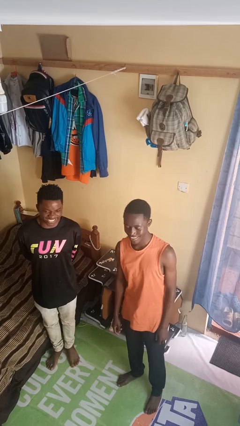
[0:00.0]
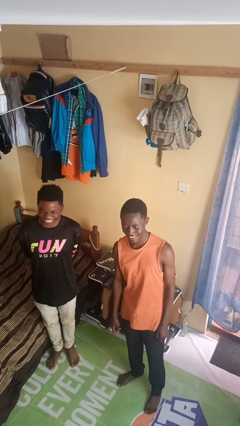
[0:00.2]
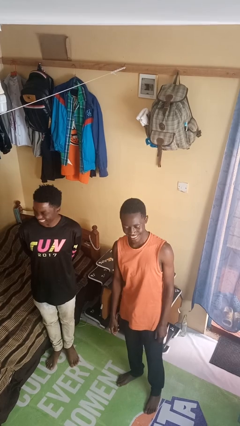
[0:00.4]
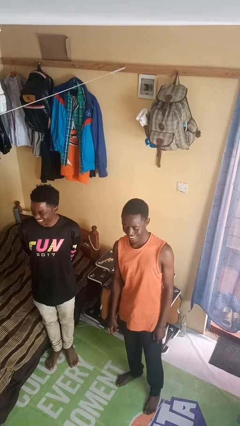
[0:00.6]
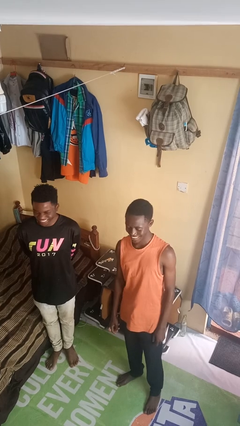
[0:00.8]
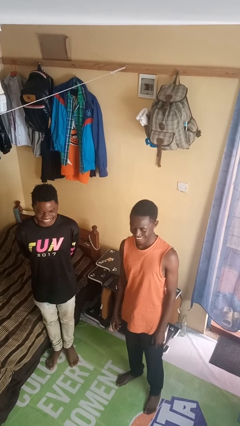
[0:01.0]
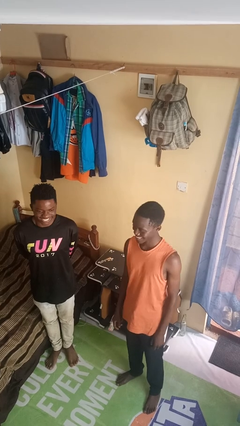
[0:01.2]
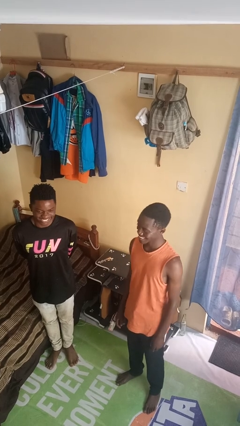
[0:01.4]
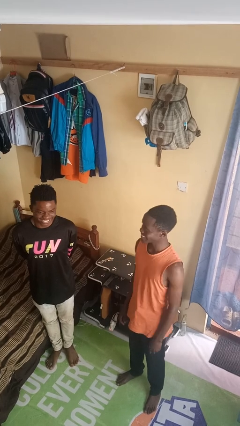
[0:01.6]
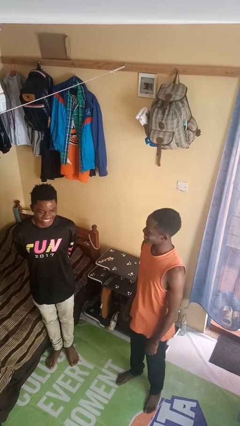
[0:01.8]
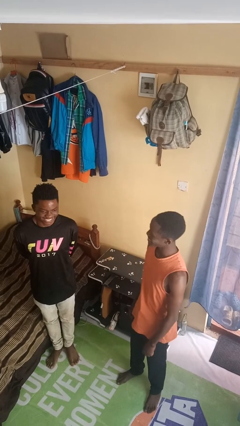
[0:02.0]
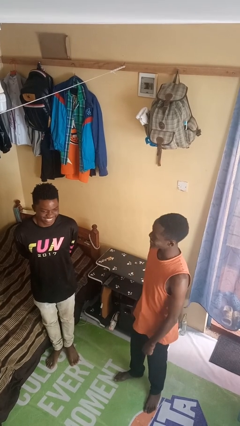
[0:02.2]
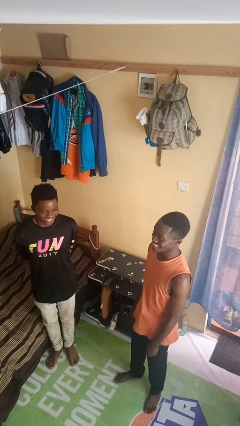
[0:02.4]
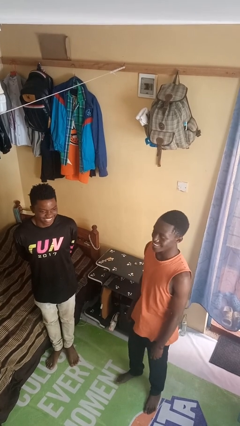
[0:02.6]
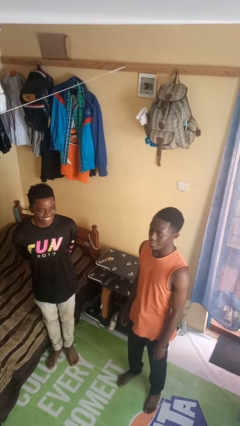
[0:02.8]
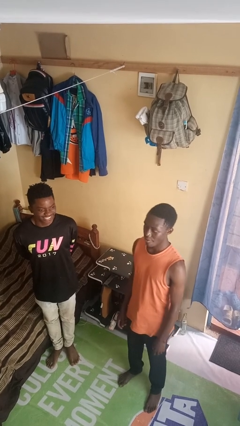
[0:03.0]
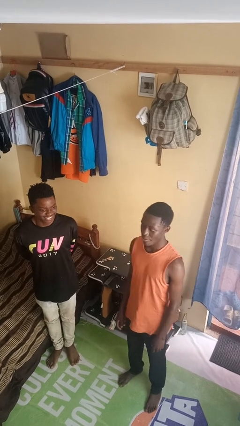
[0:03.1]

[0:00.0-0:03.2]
person laughs with person

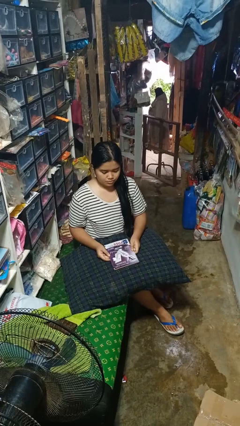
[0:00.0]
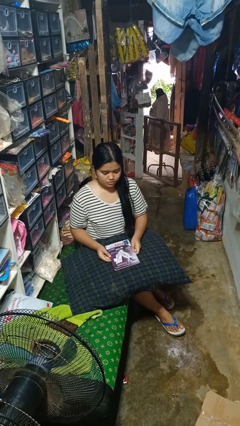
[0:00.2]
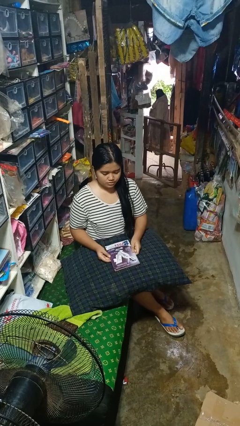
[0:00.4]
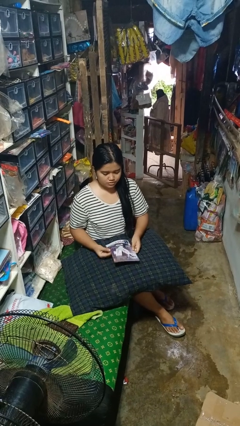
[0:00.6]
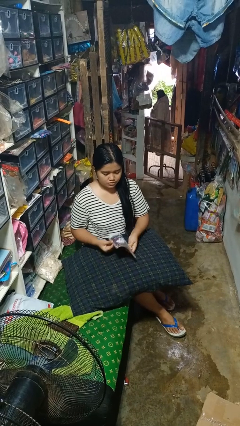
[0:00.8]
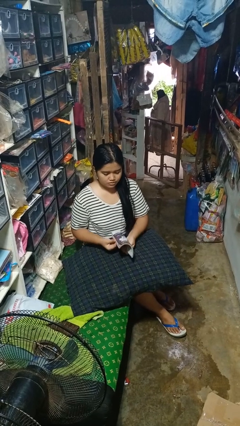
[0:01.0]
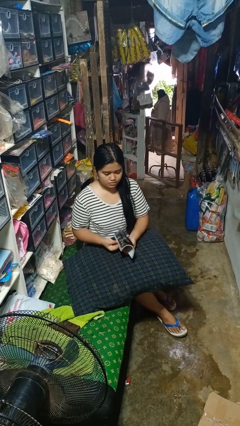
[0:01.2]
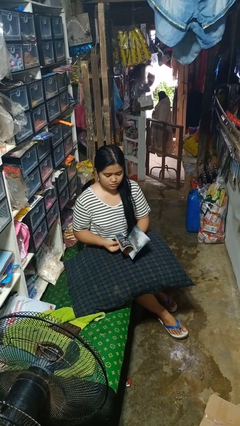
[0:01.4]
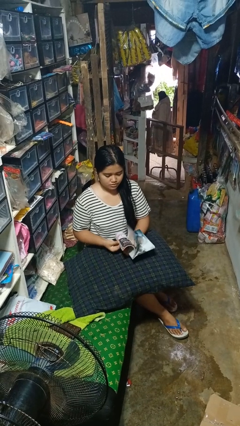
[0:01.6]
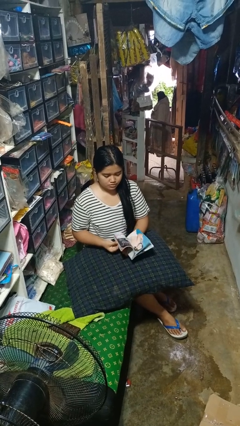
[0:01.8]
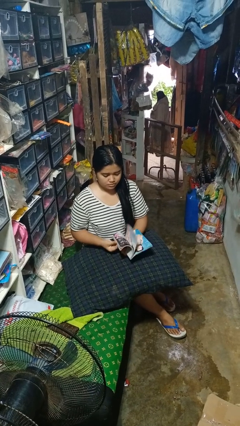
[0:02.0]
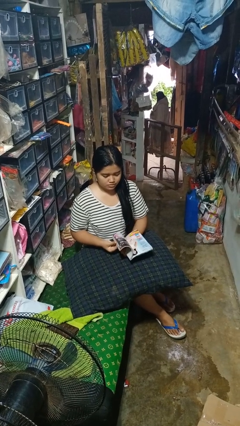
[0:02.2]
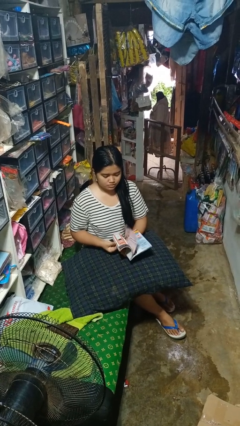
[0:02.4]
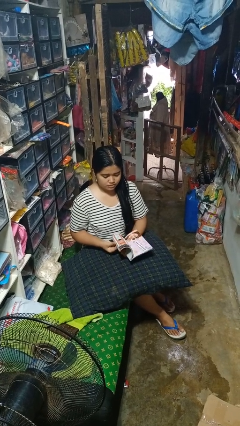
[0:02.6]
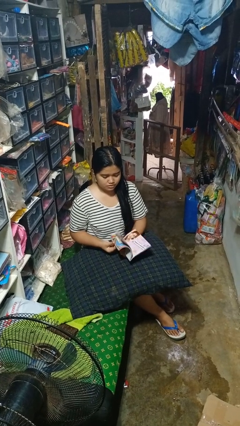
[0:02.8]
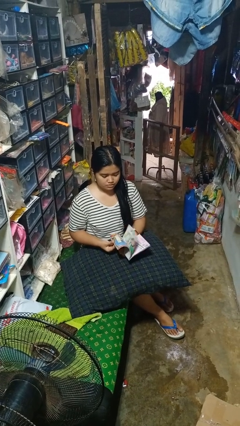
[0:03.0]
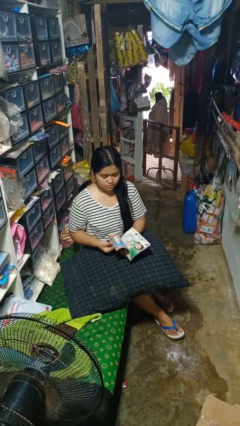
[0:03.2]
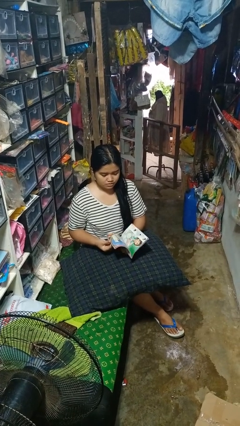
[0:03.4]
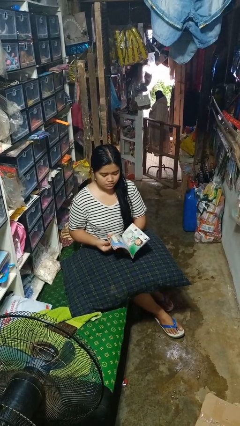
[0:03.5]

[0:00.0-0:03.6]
person reads magazine

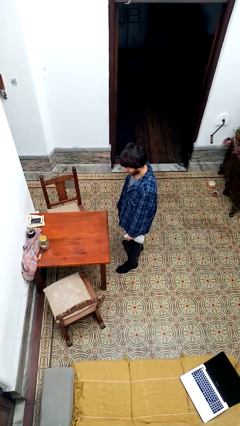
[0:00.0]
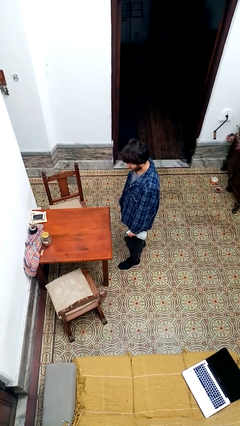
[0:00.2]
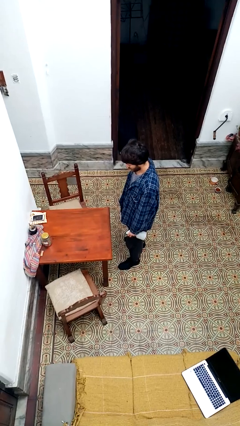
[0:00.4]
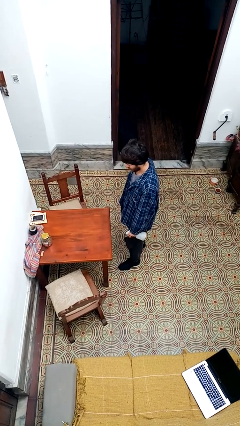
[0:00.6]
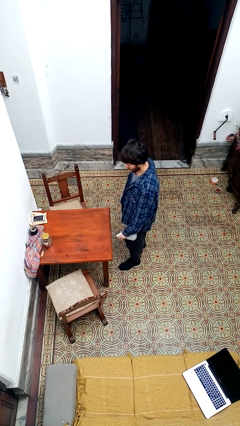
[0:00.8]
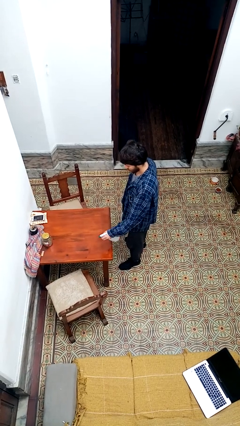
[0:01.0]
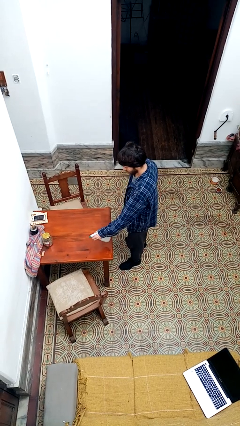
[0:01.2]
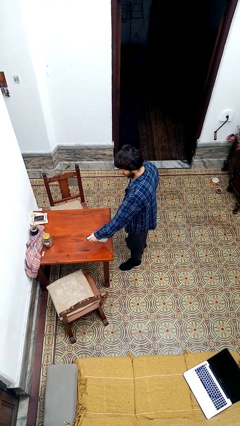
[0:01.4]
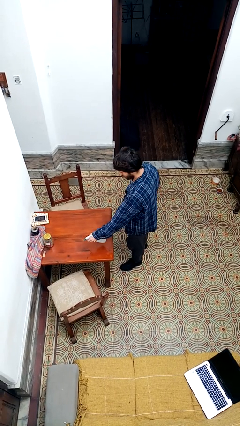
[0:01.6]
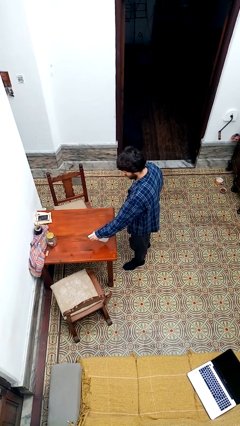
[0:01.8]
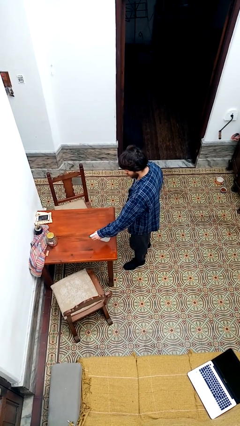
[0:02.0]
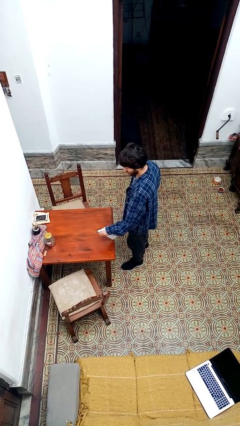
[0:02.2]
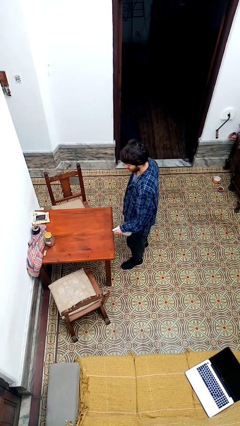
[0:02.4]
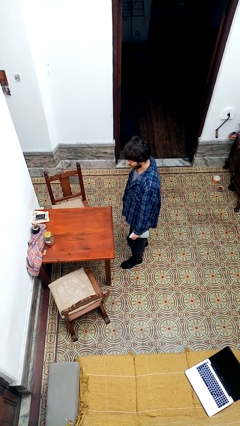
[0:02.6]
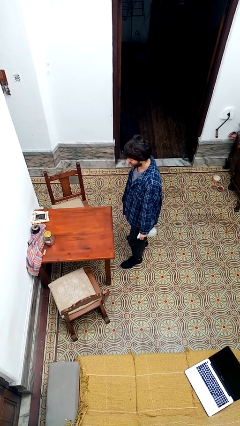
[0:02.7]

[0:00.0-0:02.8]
person sprays from bottle

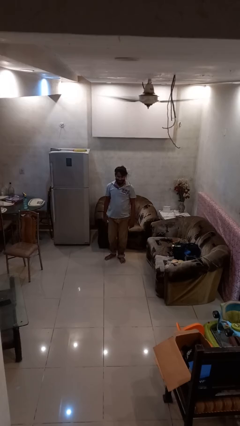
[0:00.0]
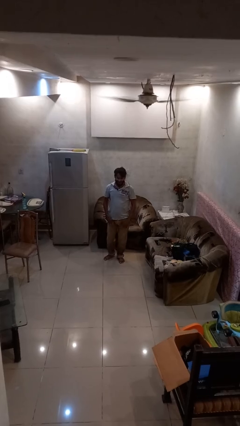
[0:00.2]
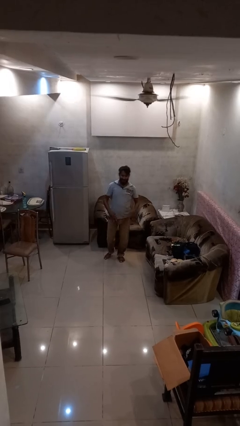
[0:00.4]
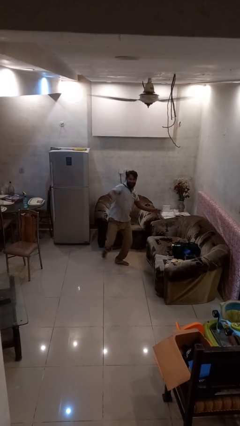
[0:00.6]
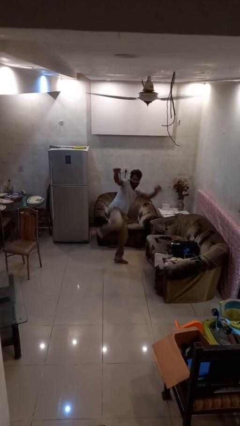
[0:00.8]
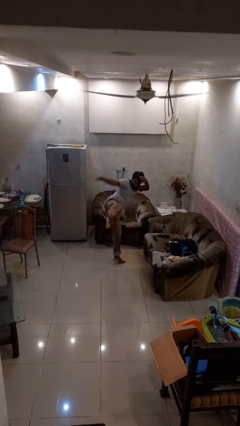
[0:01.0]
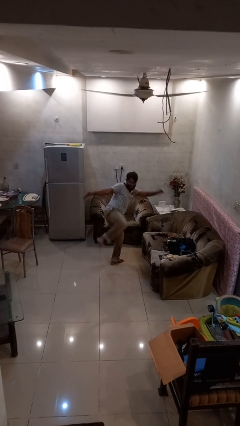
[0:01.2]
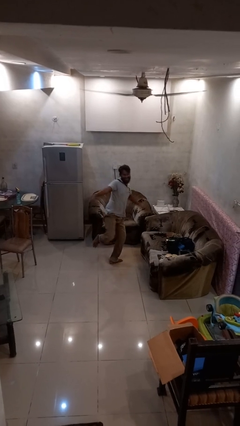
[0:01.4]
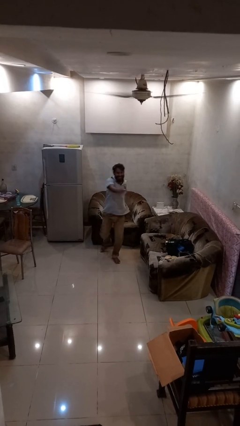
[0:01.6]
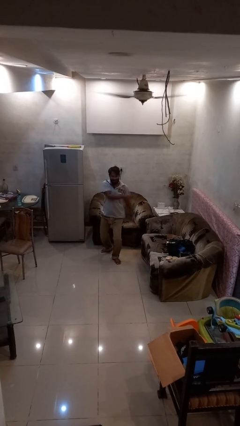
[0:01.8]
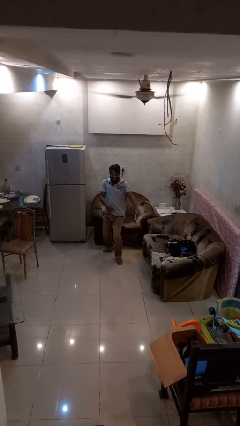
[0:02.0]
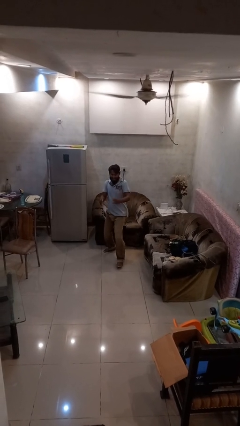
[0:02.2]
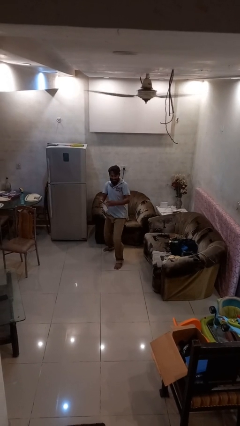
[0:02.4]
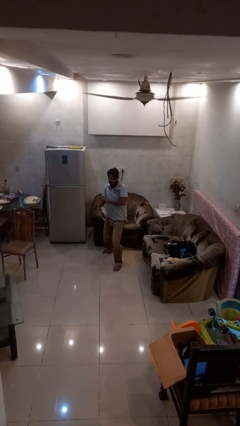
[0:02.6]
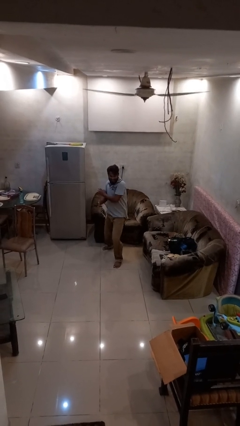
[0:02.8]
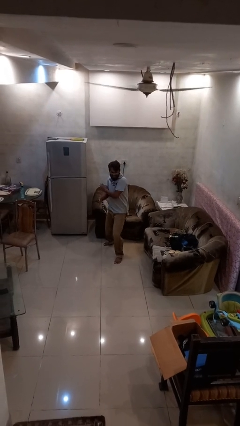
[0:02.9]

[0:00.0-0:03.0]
person karate kicks

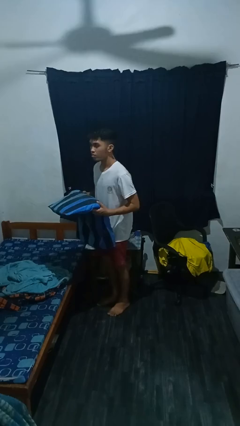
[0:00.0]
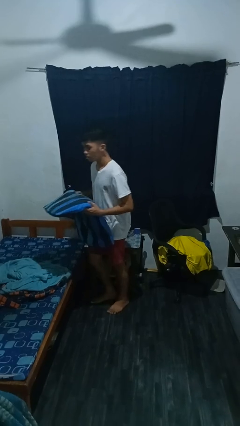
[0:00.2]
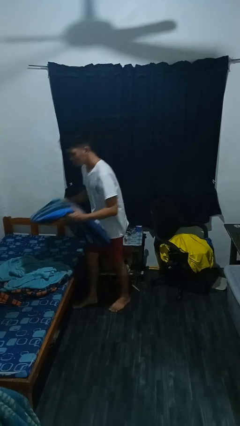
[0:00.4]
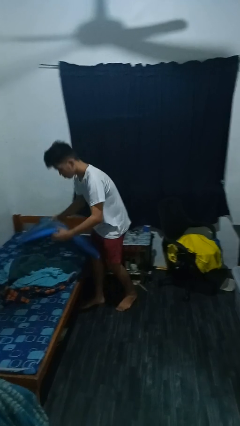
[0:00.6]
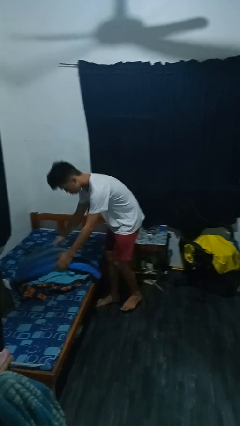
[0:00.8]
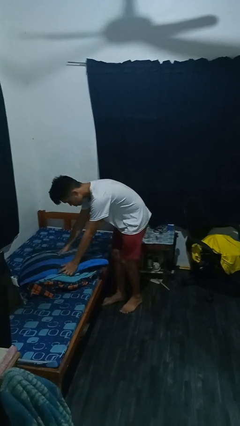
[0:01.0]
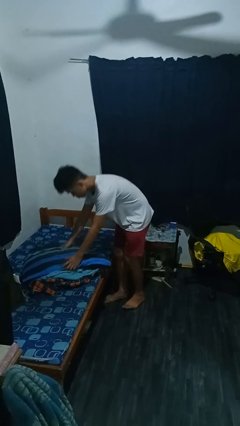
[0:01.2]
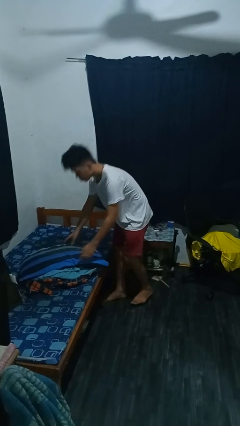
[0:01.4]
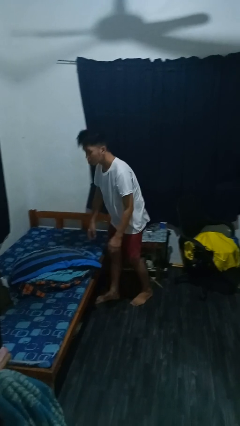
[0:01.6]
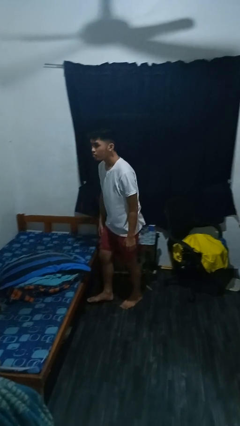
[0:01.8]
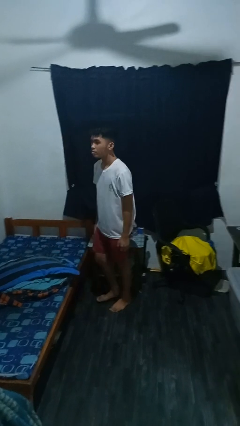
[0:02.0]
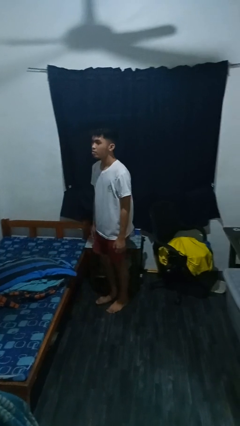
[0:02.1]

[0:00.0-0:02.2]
person puts down object on bed

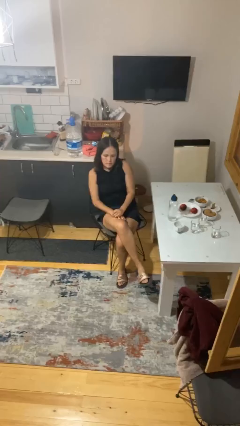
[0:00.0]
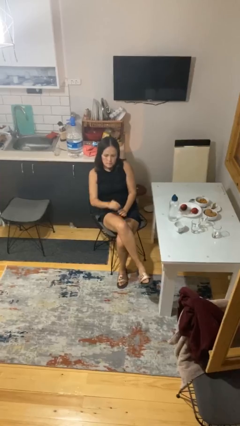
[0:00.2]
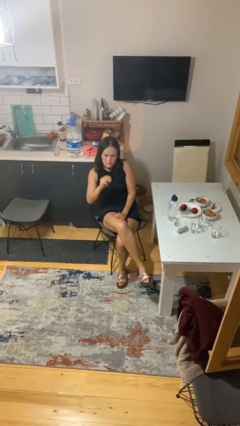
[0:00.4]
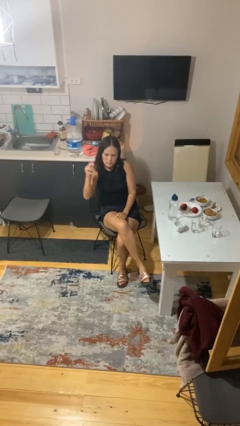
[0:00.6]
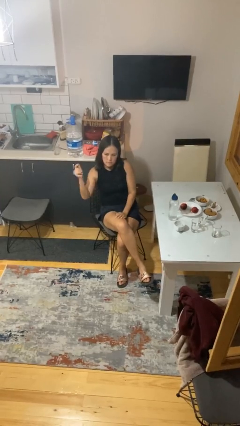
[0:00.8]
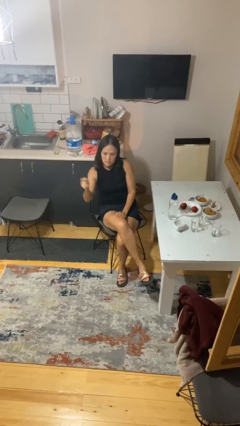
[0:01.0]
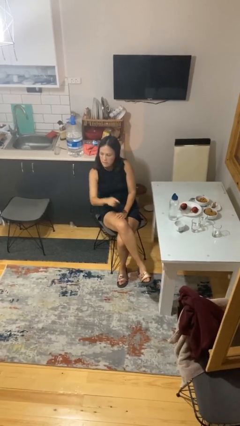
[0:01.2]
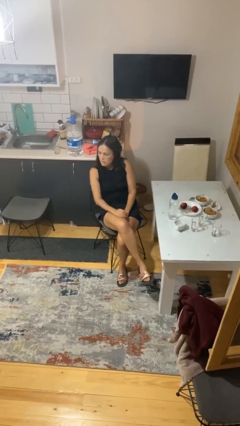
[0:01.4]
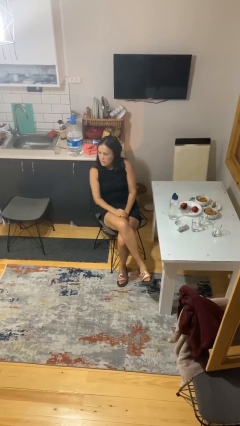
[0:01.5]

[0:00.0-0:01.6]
person snaps fingers

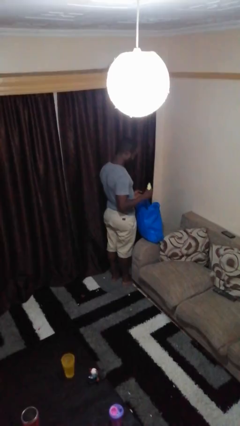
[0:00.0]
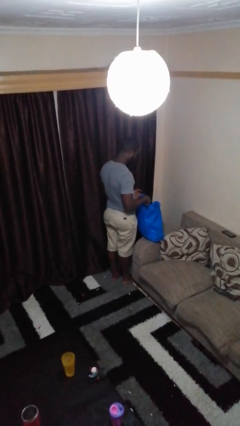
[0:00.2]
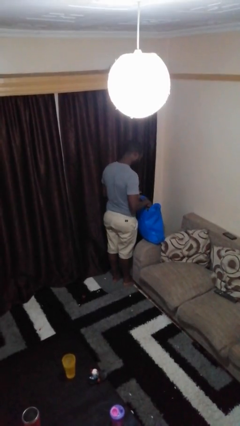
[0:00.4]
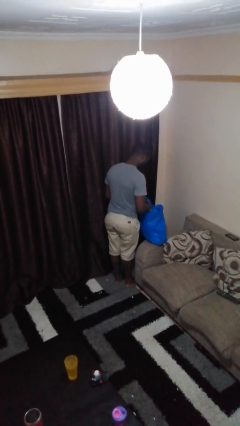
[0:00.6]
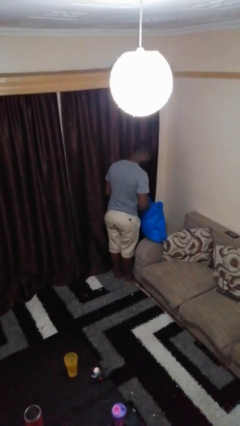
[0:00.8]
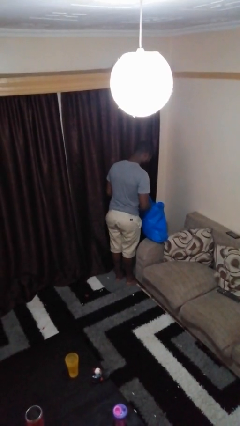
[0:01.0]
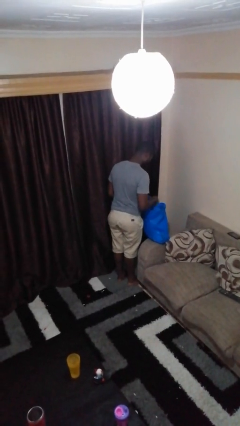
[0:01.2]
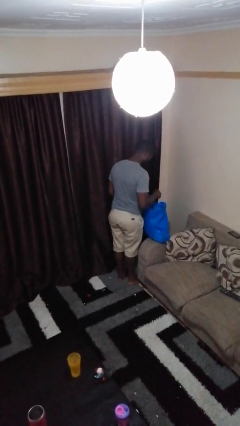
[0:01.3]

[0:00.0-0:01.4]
person puts object into bag
